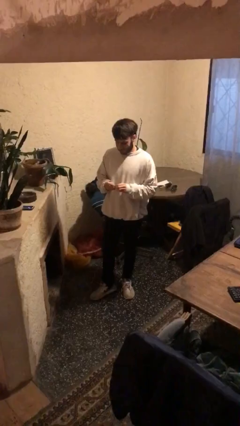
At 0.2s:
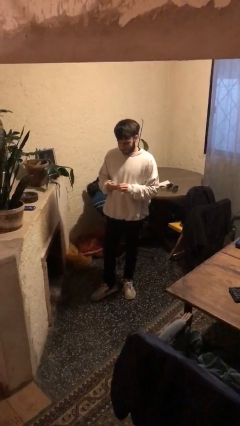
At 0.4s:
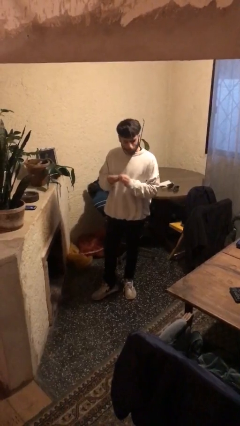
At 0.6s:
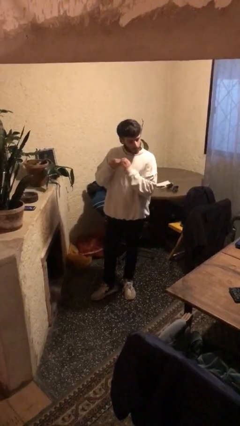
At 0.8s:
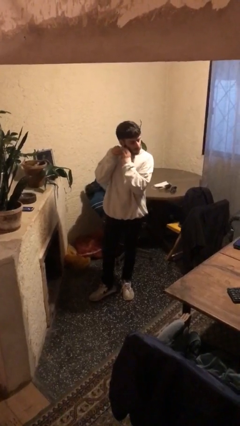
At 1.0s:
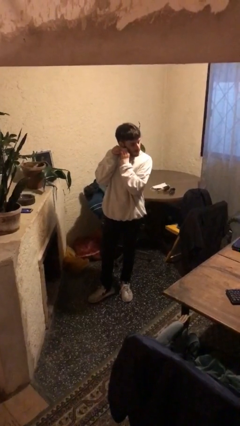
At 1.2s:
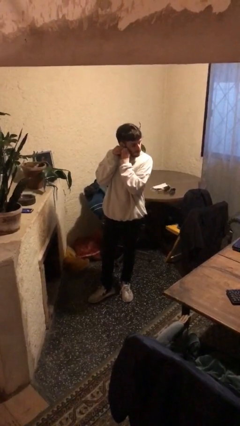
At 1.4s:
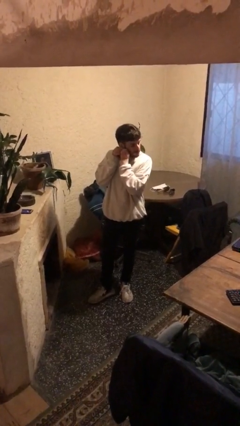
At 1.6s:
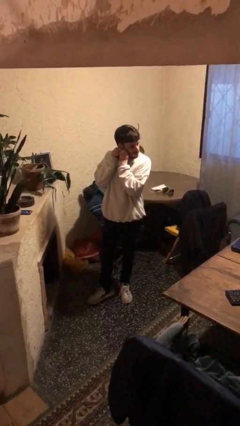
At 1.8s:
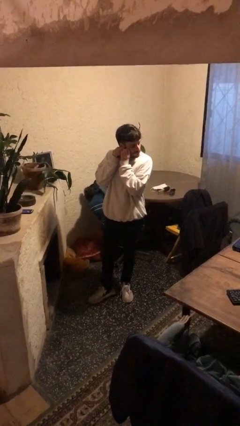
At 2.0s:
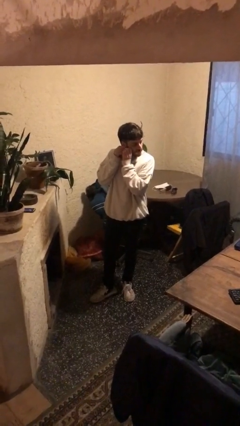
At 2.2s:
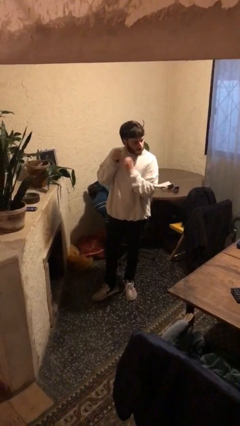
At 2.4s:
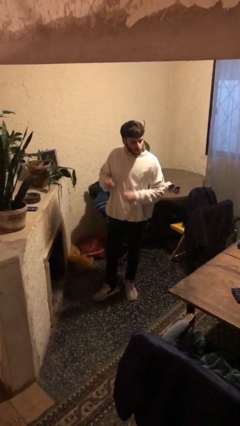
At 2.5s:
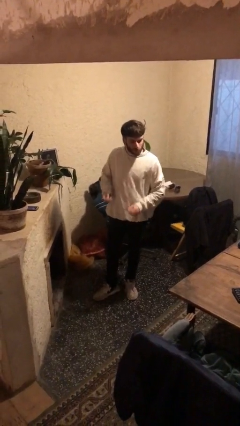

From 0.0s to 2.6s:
person puts on earrings

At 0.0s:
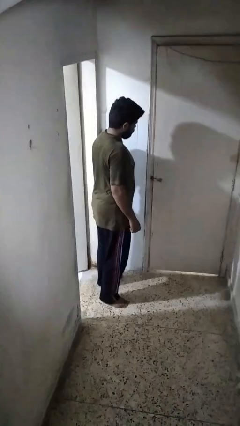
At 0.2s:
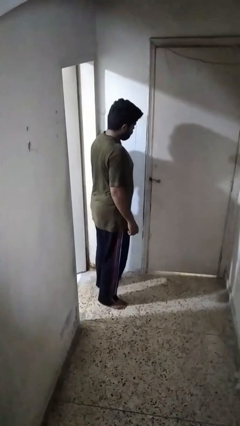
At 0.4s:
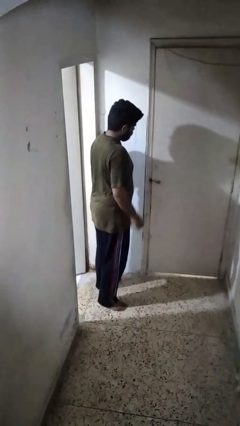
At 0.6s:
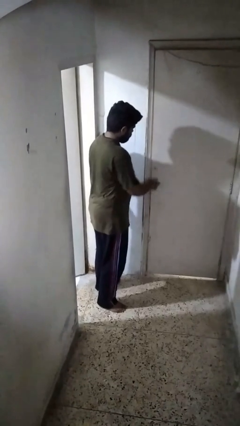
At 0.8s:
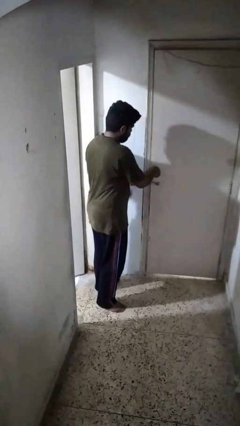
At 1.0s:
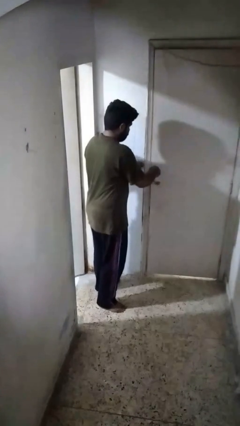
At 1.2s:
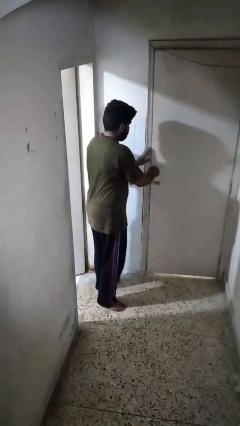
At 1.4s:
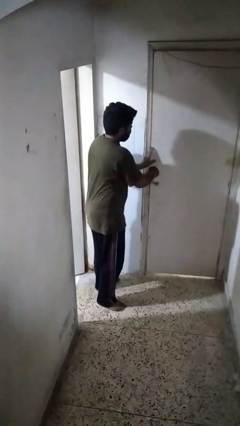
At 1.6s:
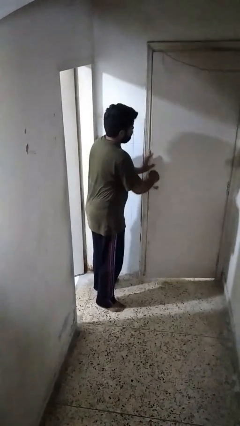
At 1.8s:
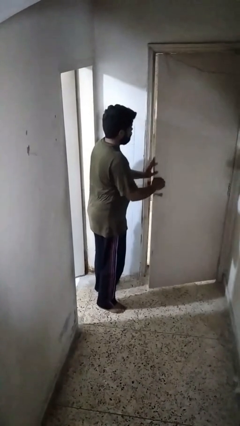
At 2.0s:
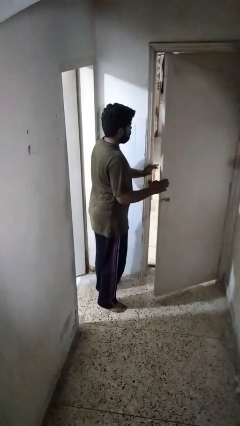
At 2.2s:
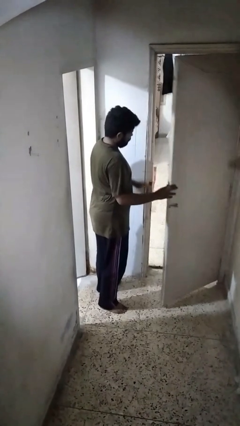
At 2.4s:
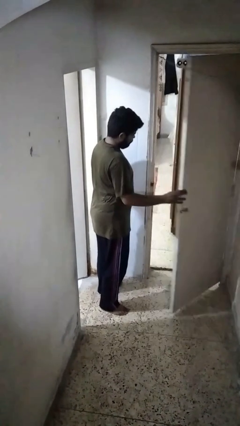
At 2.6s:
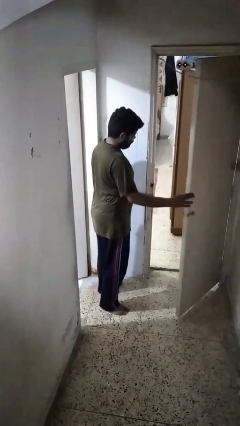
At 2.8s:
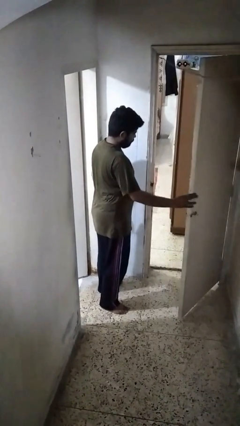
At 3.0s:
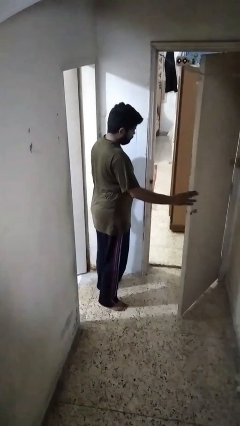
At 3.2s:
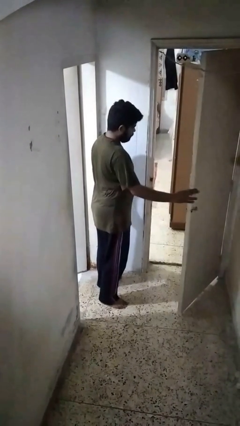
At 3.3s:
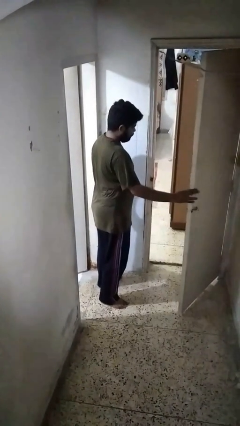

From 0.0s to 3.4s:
person opens facility door

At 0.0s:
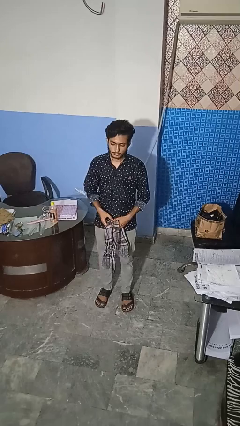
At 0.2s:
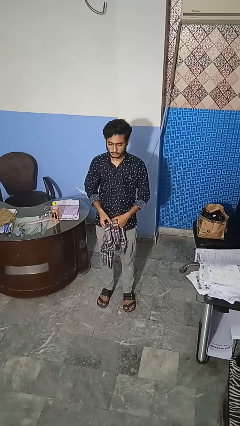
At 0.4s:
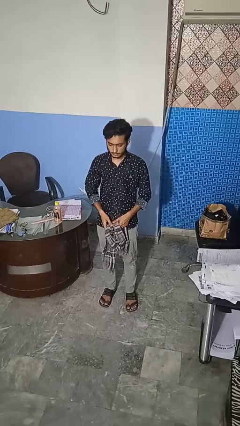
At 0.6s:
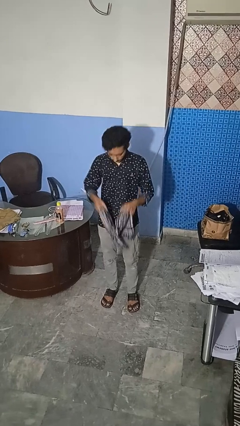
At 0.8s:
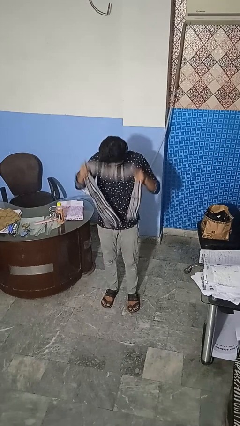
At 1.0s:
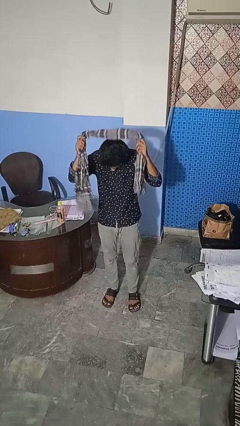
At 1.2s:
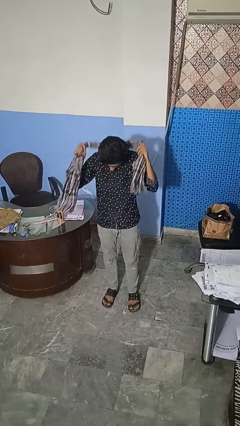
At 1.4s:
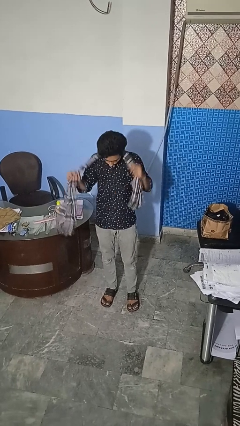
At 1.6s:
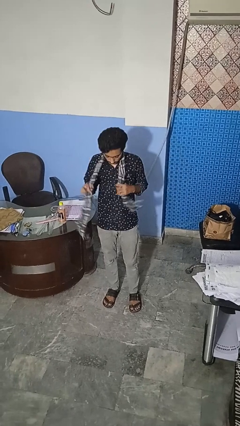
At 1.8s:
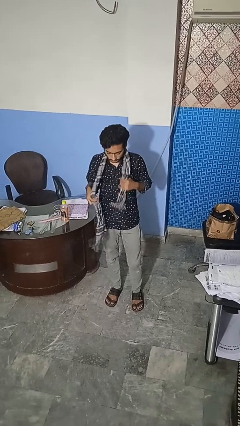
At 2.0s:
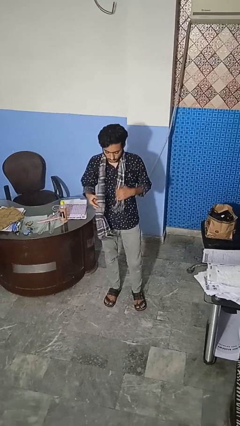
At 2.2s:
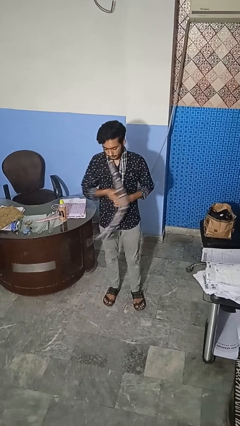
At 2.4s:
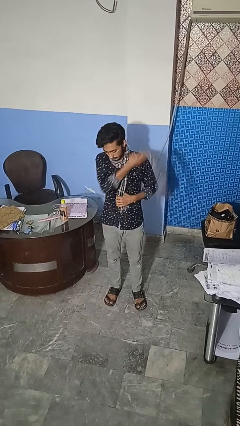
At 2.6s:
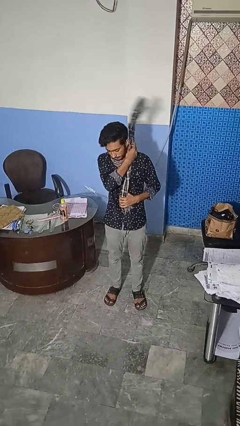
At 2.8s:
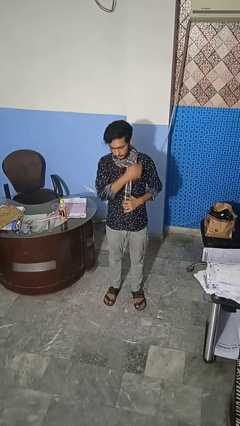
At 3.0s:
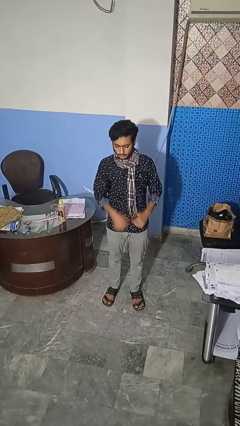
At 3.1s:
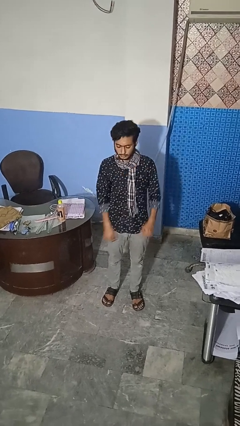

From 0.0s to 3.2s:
person puts on scarf

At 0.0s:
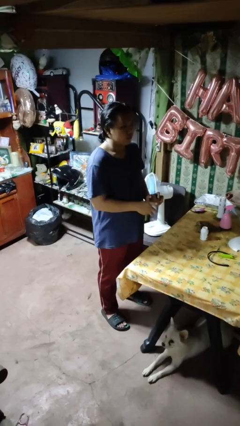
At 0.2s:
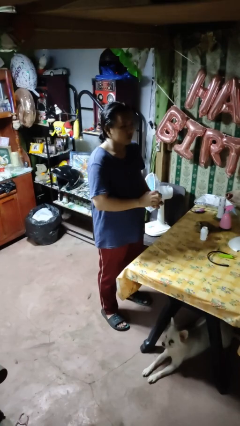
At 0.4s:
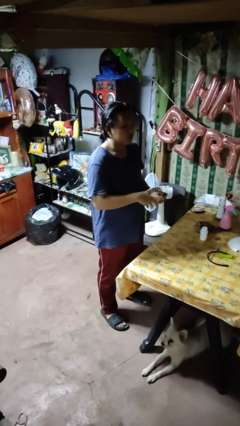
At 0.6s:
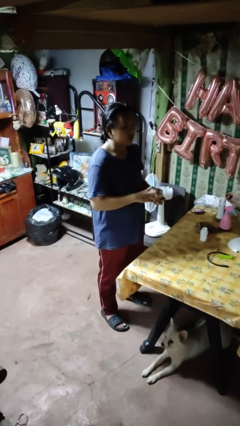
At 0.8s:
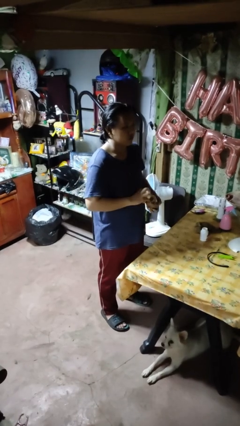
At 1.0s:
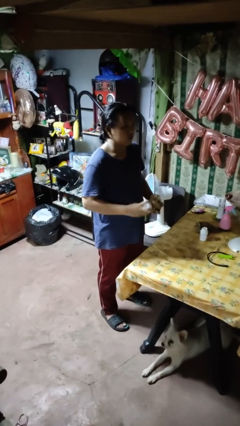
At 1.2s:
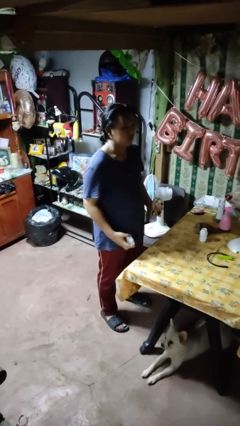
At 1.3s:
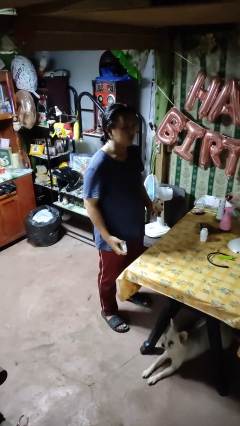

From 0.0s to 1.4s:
person opens jar

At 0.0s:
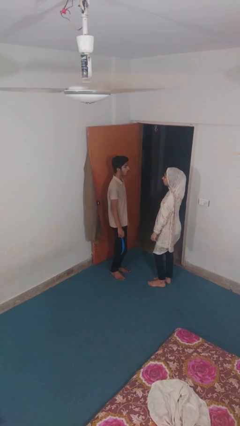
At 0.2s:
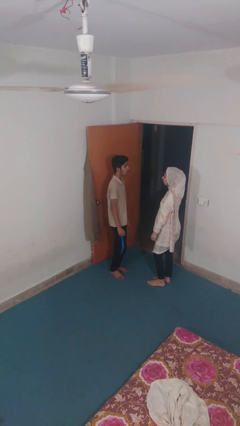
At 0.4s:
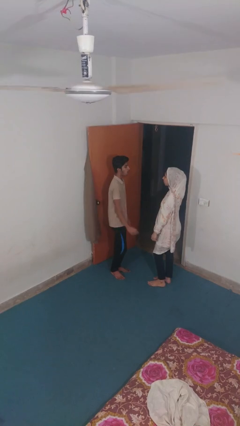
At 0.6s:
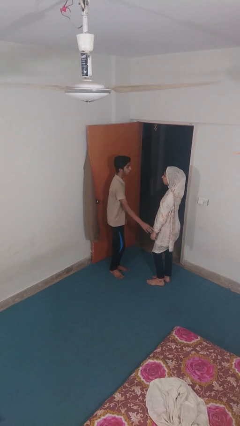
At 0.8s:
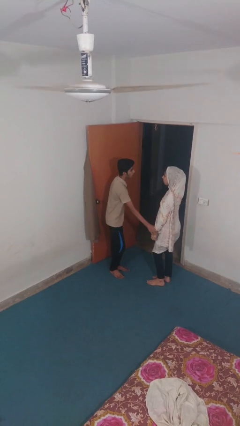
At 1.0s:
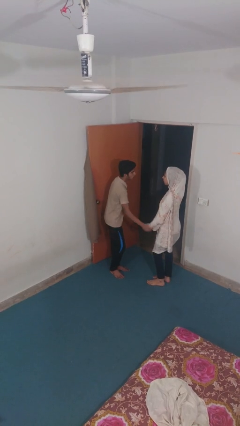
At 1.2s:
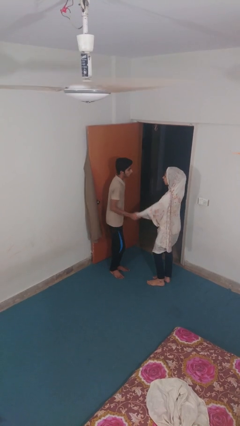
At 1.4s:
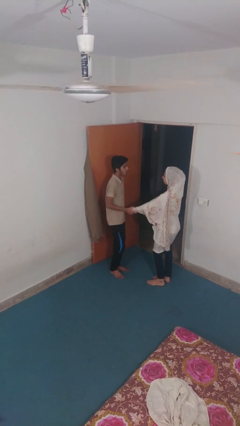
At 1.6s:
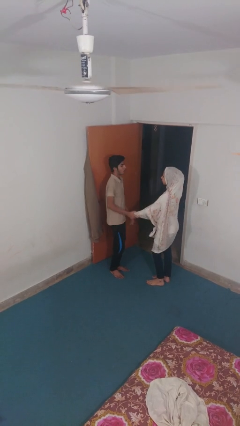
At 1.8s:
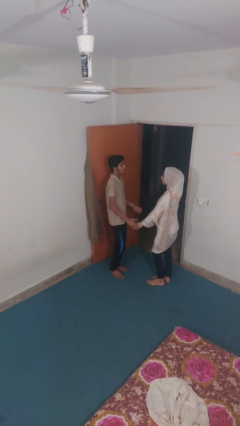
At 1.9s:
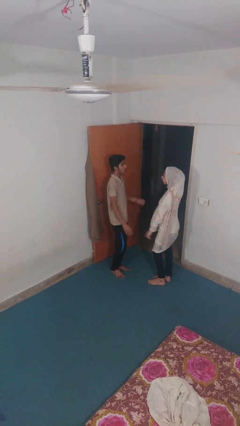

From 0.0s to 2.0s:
person grabs person by forearm

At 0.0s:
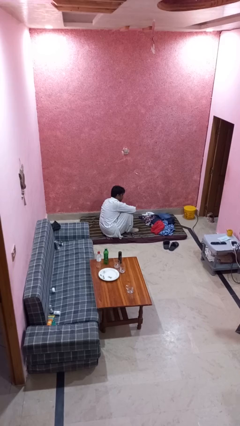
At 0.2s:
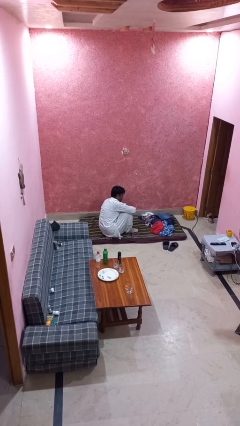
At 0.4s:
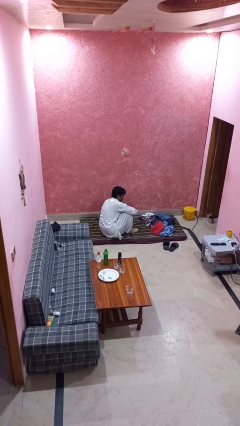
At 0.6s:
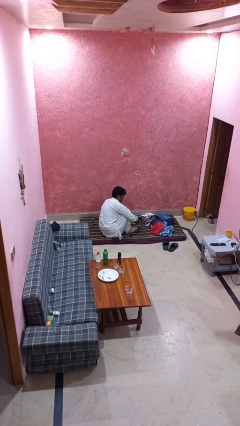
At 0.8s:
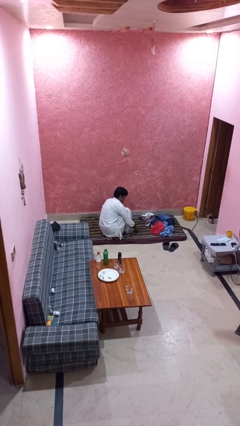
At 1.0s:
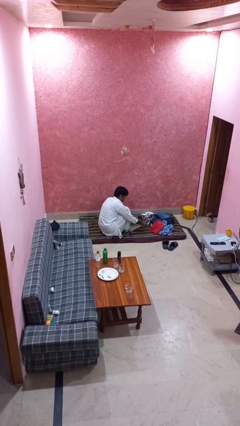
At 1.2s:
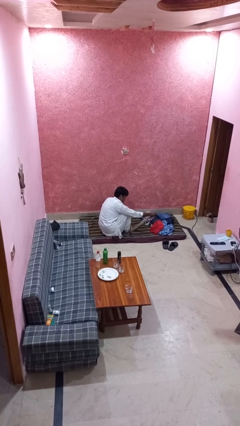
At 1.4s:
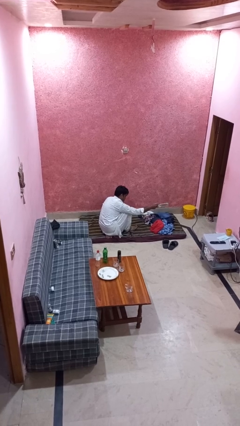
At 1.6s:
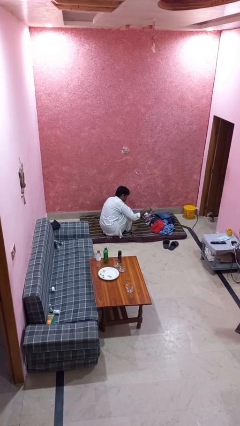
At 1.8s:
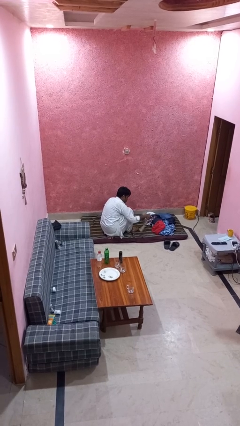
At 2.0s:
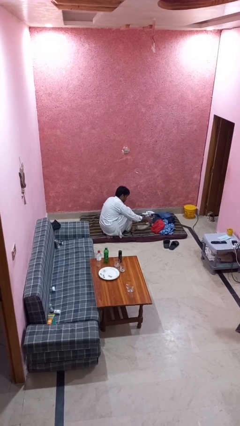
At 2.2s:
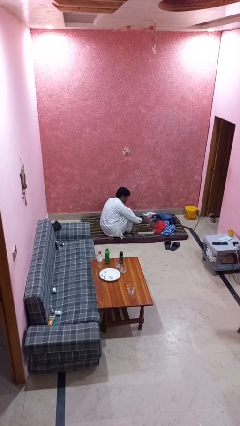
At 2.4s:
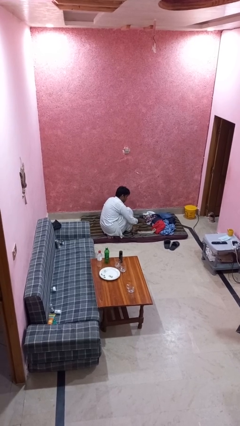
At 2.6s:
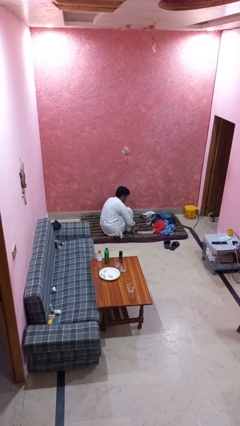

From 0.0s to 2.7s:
person takes off socks

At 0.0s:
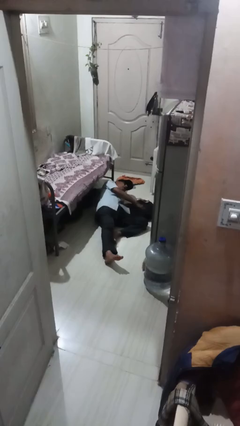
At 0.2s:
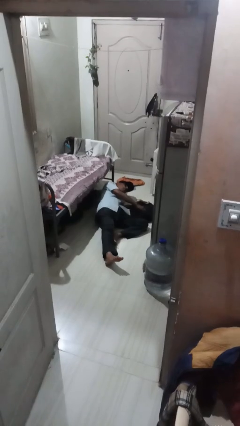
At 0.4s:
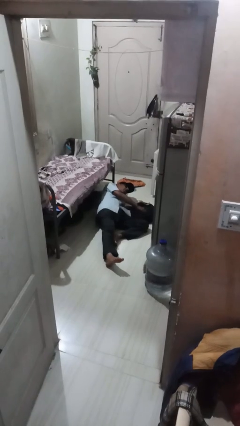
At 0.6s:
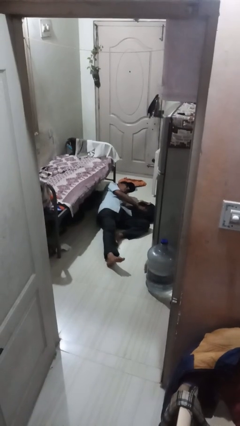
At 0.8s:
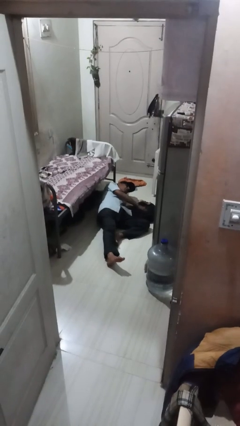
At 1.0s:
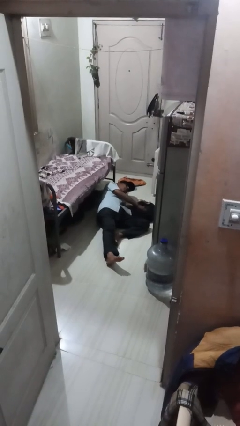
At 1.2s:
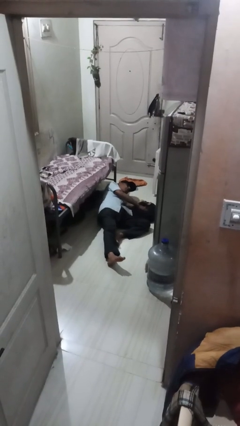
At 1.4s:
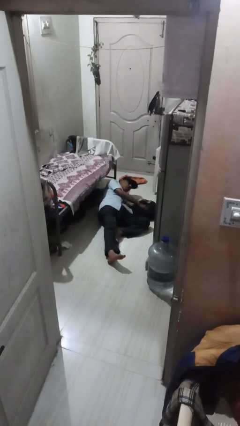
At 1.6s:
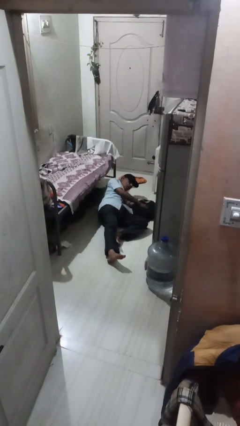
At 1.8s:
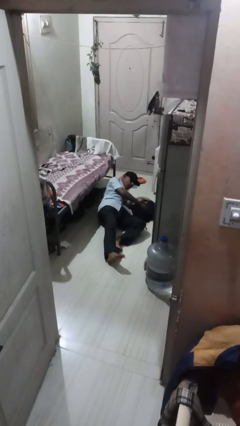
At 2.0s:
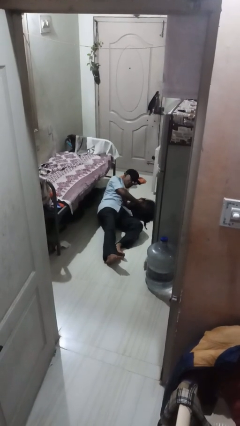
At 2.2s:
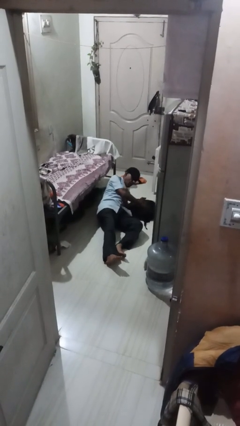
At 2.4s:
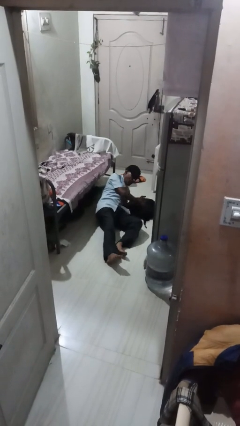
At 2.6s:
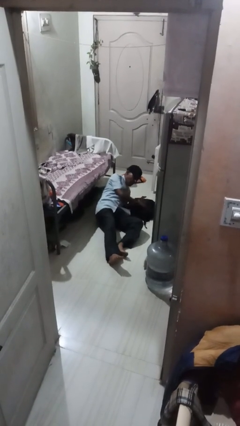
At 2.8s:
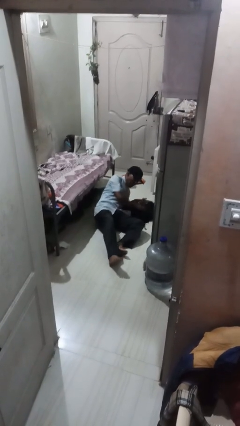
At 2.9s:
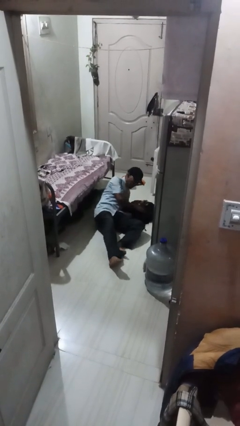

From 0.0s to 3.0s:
person lies down on floor
